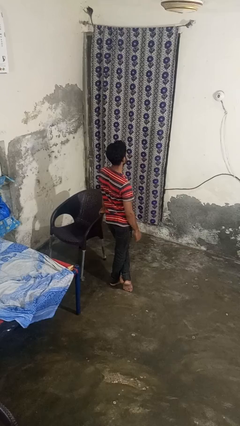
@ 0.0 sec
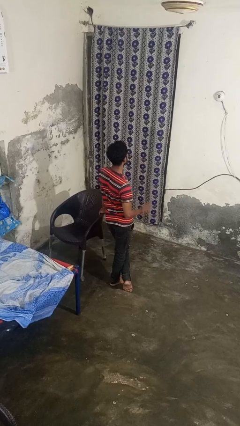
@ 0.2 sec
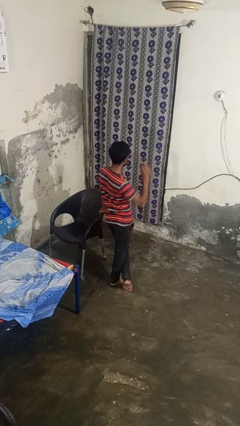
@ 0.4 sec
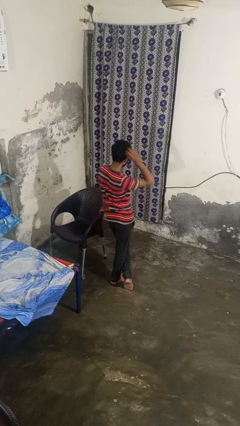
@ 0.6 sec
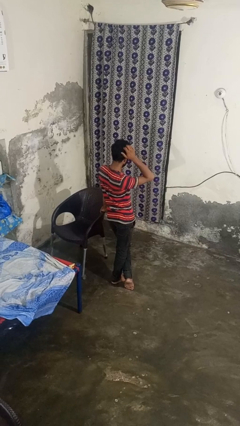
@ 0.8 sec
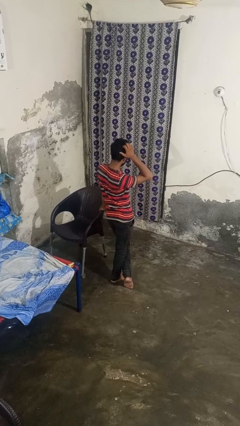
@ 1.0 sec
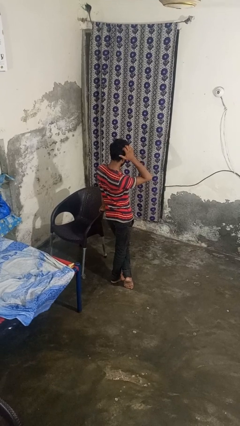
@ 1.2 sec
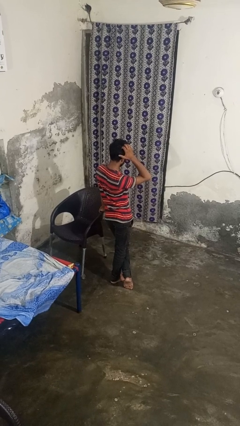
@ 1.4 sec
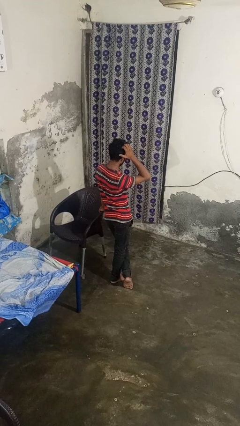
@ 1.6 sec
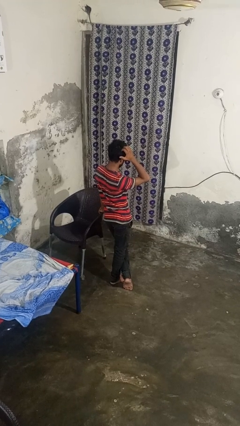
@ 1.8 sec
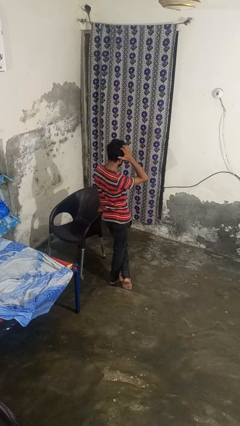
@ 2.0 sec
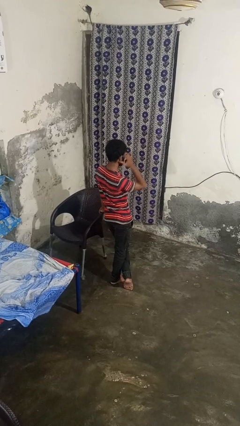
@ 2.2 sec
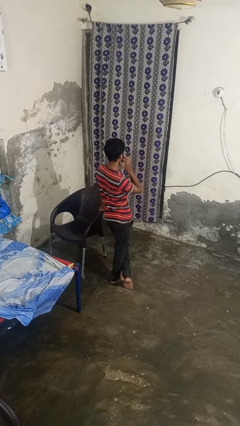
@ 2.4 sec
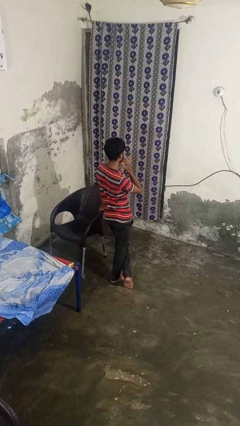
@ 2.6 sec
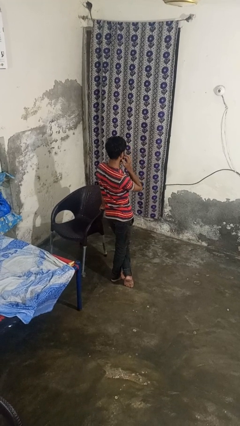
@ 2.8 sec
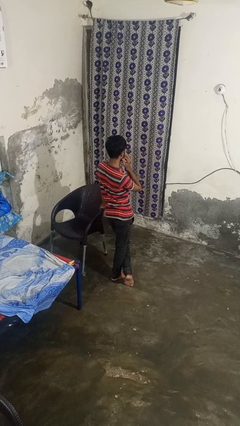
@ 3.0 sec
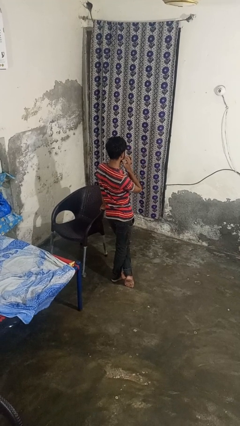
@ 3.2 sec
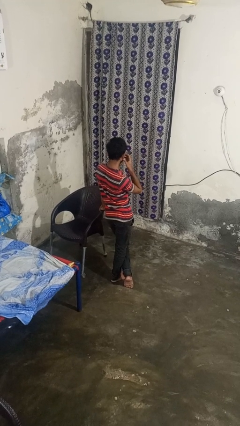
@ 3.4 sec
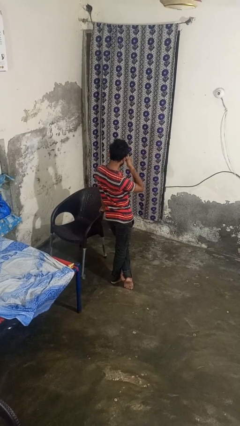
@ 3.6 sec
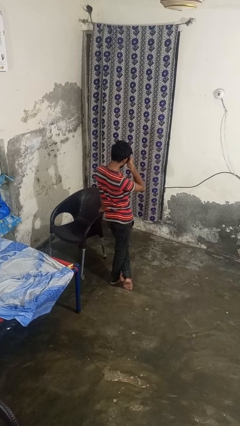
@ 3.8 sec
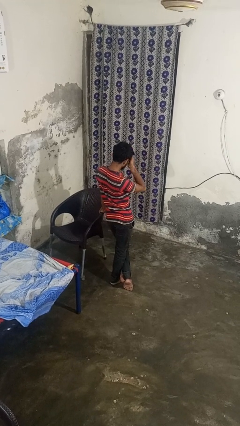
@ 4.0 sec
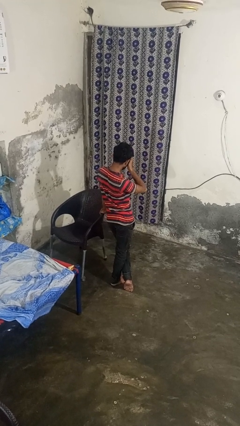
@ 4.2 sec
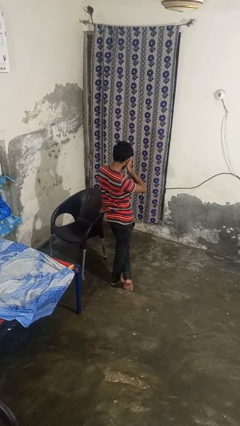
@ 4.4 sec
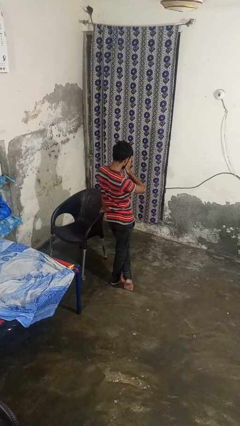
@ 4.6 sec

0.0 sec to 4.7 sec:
person scratches face

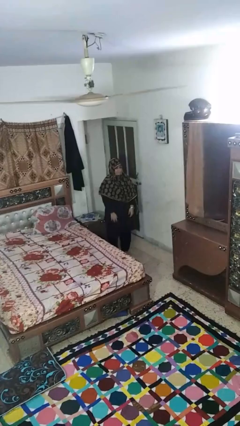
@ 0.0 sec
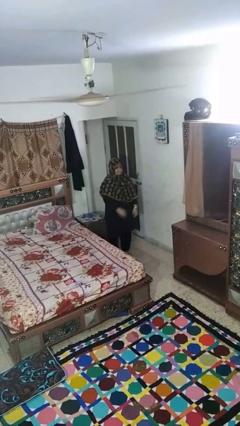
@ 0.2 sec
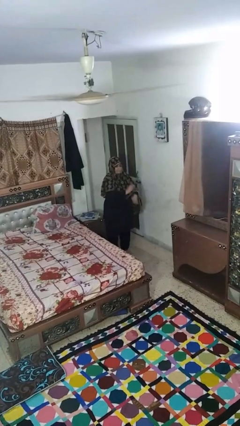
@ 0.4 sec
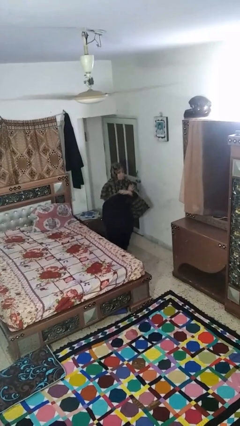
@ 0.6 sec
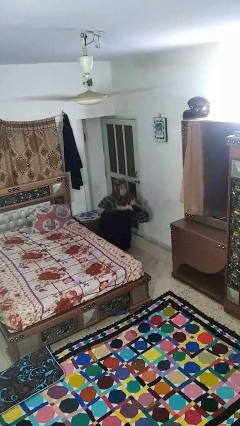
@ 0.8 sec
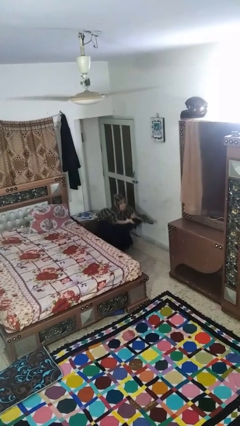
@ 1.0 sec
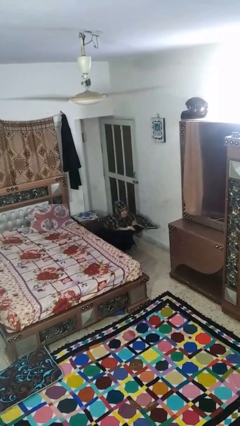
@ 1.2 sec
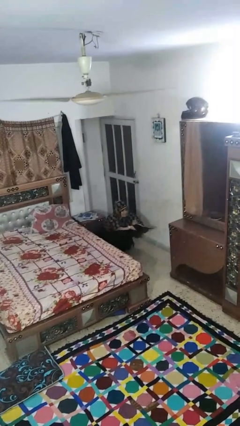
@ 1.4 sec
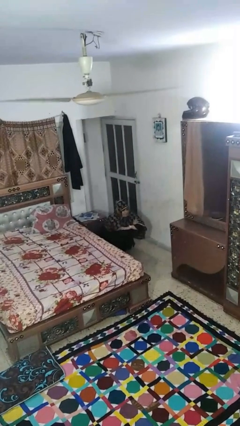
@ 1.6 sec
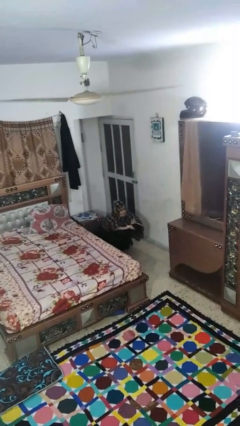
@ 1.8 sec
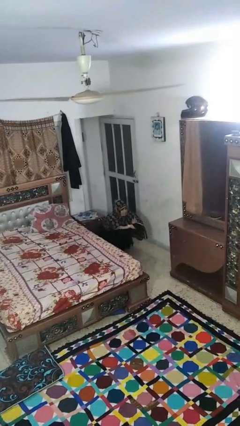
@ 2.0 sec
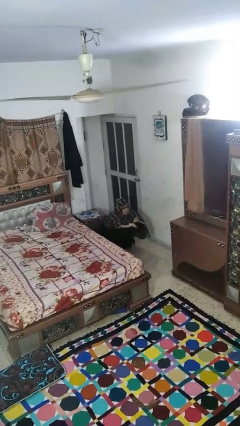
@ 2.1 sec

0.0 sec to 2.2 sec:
person squats

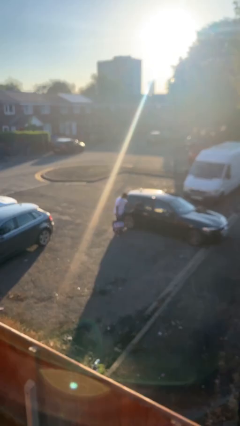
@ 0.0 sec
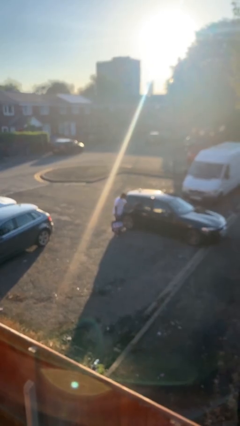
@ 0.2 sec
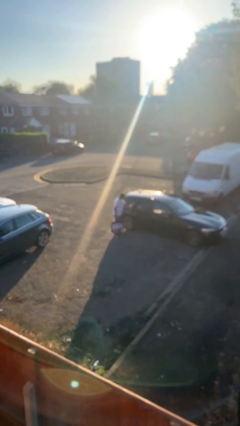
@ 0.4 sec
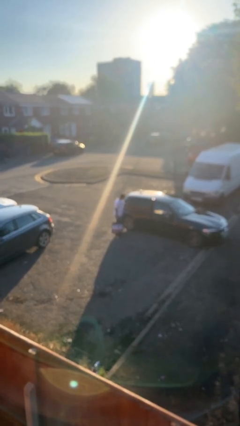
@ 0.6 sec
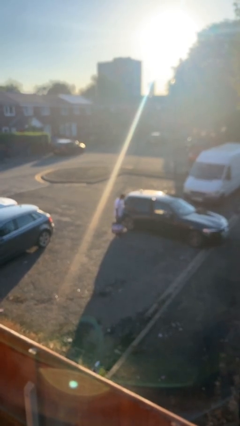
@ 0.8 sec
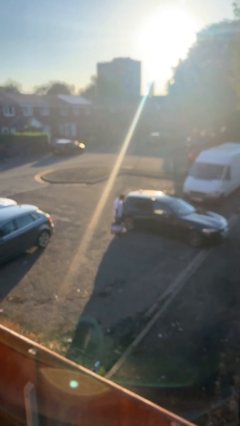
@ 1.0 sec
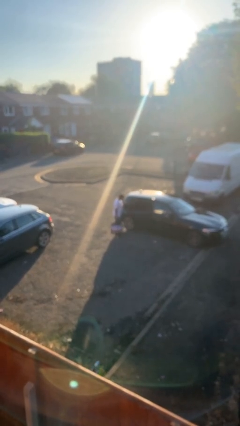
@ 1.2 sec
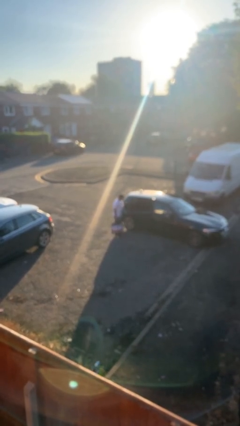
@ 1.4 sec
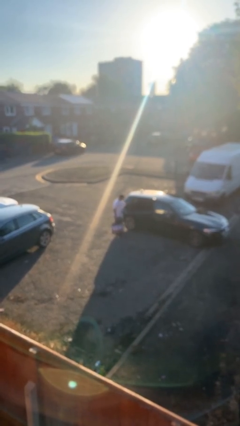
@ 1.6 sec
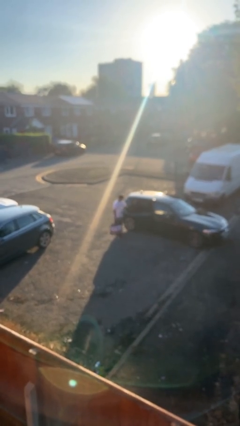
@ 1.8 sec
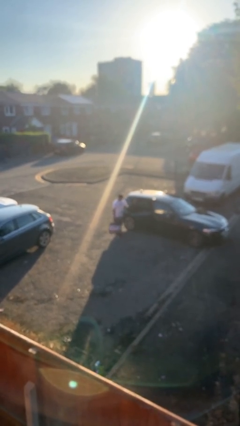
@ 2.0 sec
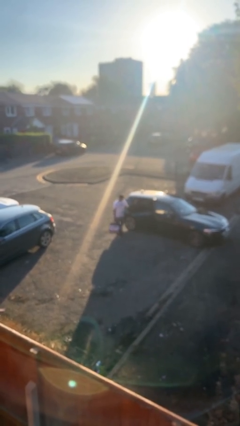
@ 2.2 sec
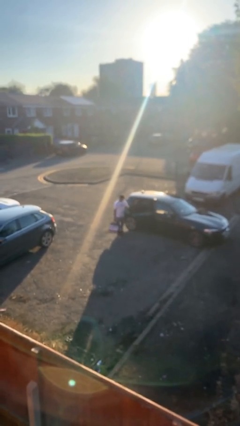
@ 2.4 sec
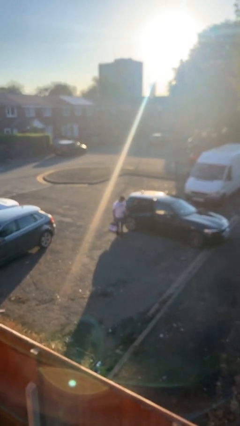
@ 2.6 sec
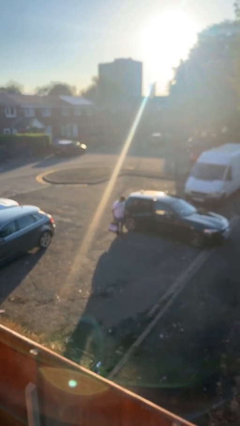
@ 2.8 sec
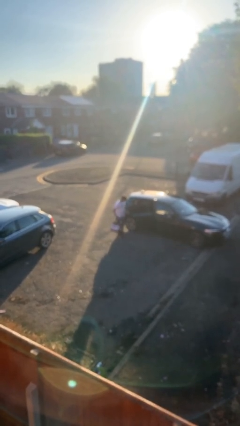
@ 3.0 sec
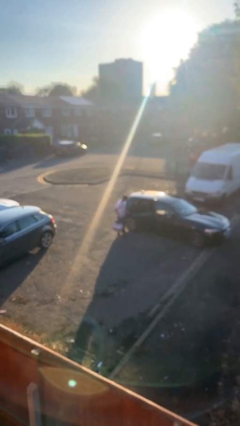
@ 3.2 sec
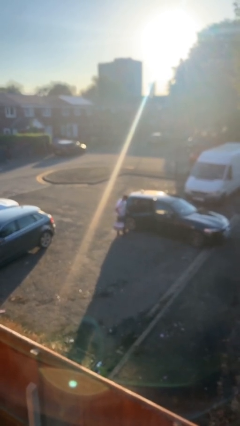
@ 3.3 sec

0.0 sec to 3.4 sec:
person opens car door

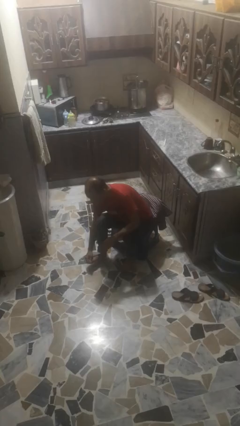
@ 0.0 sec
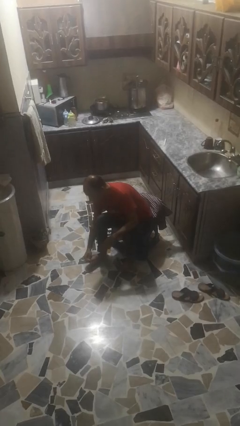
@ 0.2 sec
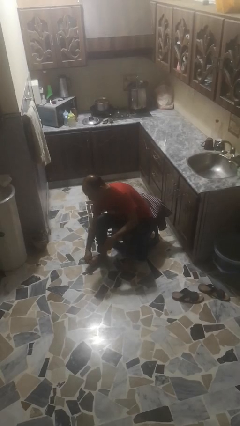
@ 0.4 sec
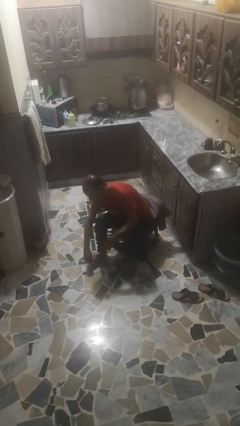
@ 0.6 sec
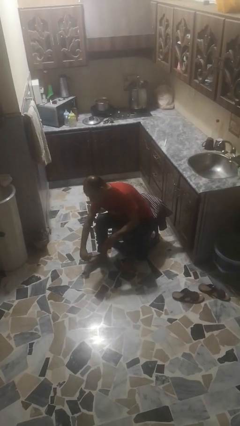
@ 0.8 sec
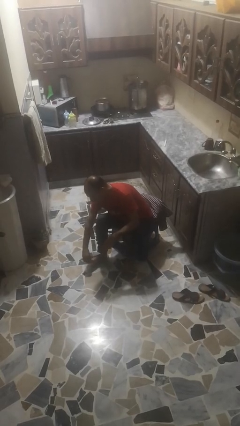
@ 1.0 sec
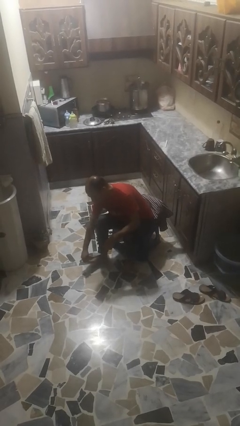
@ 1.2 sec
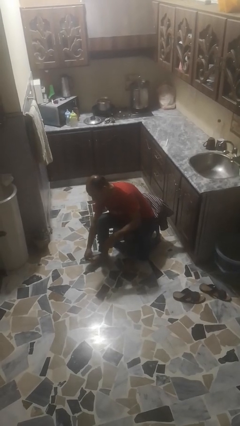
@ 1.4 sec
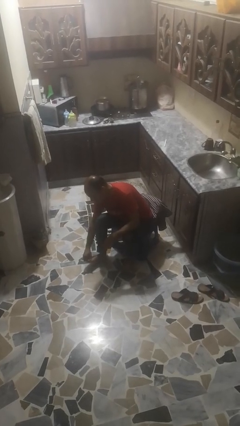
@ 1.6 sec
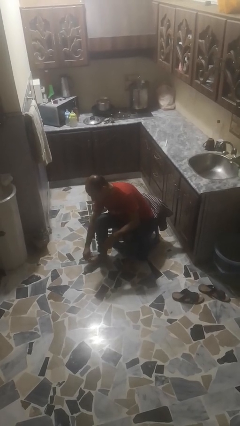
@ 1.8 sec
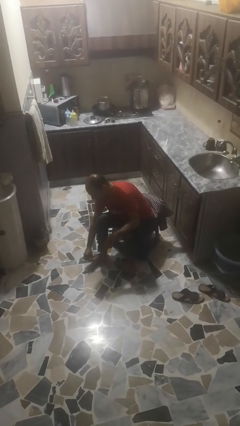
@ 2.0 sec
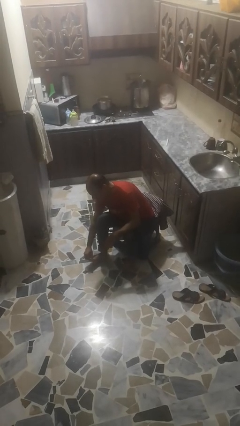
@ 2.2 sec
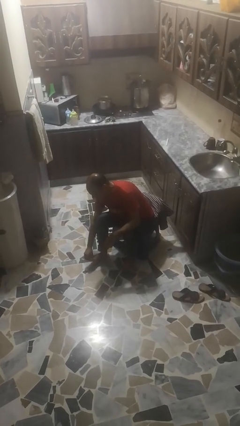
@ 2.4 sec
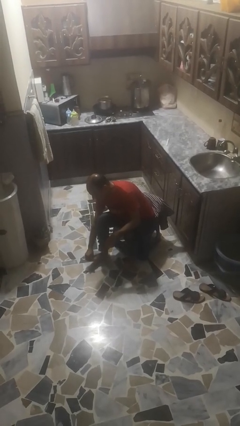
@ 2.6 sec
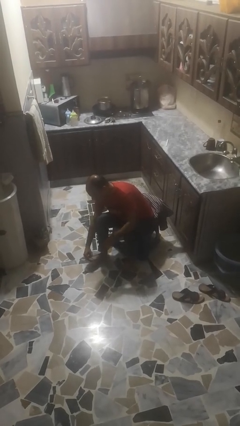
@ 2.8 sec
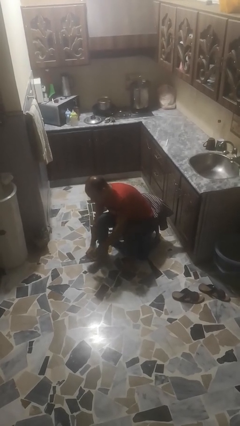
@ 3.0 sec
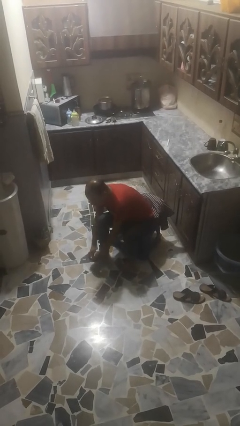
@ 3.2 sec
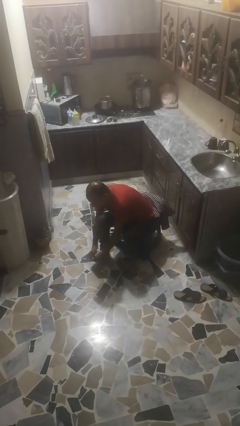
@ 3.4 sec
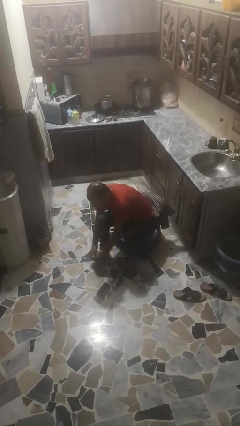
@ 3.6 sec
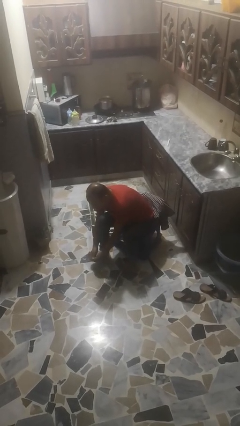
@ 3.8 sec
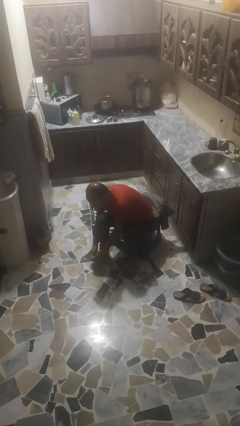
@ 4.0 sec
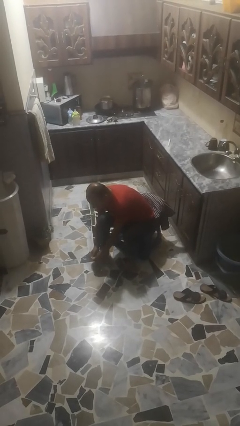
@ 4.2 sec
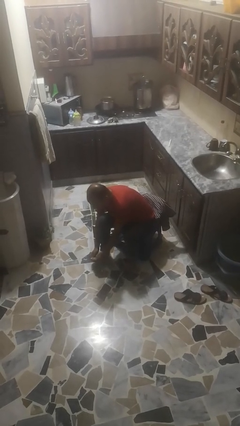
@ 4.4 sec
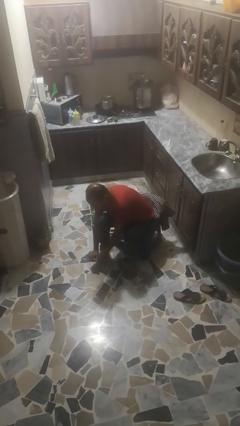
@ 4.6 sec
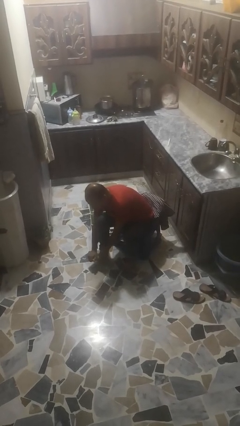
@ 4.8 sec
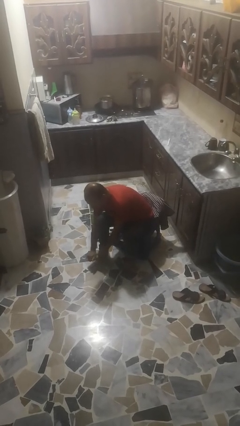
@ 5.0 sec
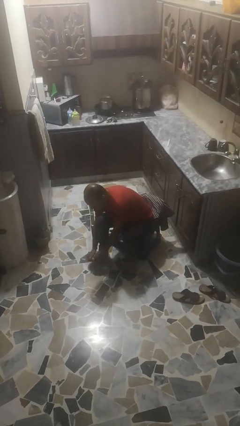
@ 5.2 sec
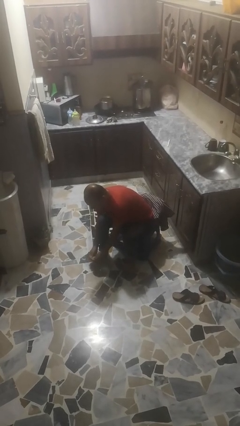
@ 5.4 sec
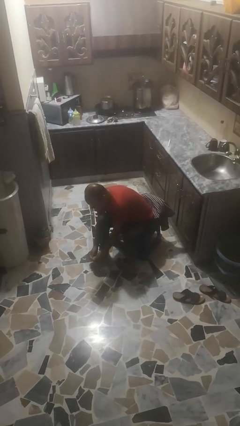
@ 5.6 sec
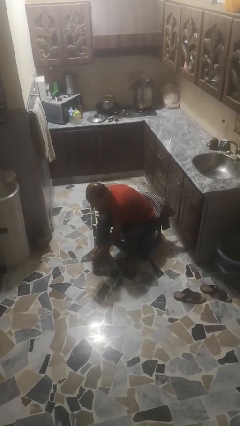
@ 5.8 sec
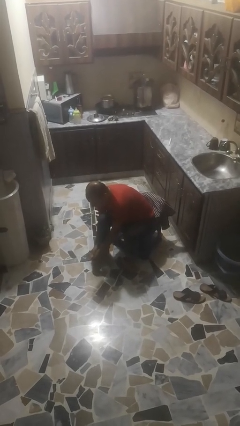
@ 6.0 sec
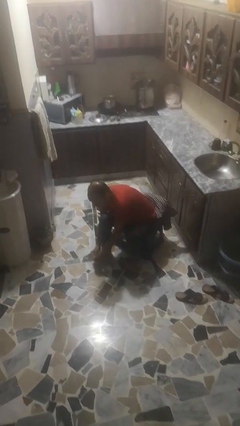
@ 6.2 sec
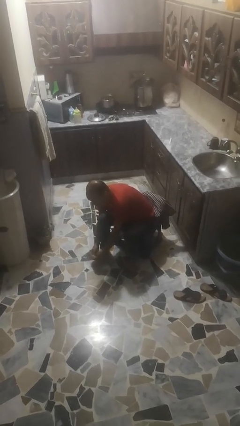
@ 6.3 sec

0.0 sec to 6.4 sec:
person stubs toe

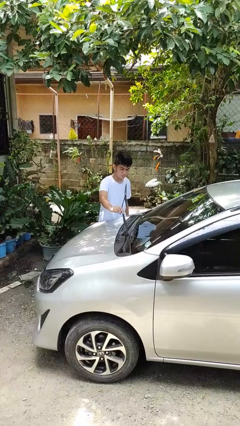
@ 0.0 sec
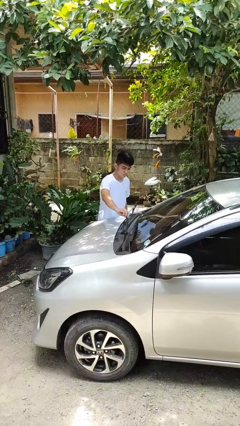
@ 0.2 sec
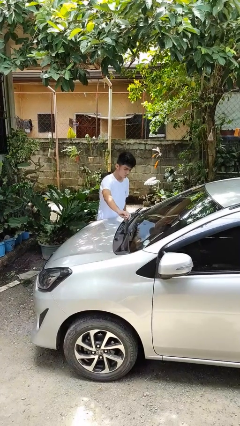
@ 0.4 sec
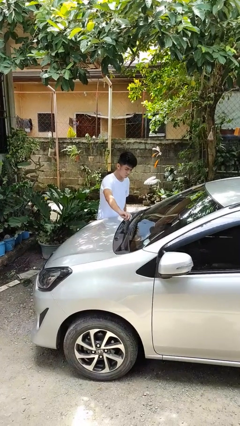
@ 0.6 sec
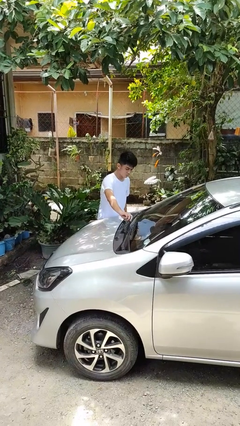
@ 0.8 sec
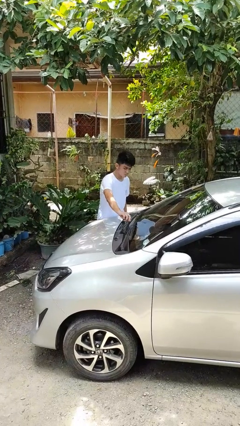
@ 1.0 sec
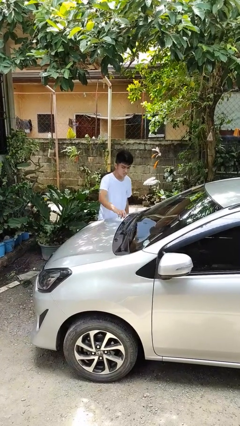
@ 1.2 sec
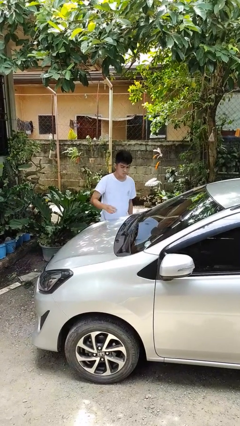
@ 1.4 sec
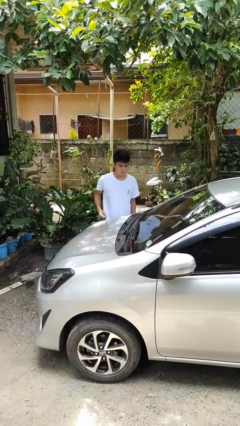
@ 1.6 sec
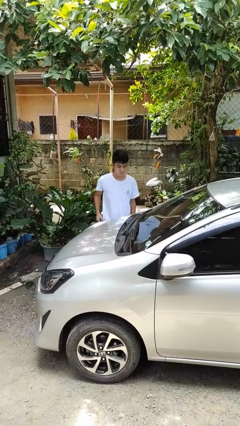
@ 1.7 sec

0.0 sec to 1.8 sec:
person flips down car wipers
